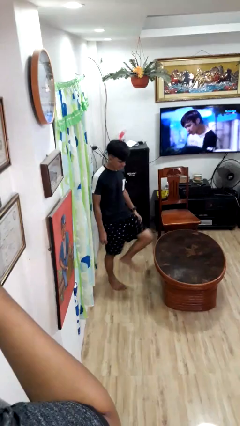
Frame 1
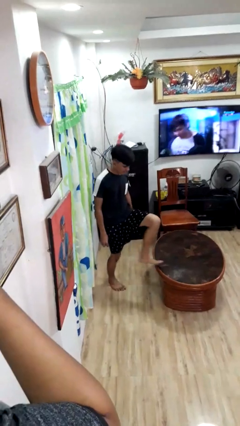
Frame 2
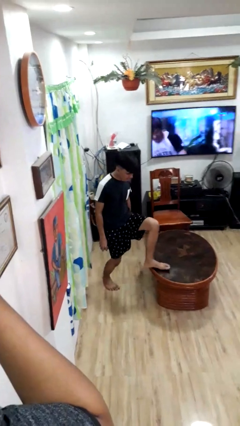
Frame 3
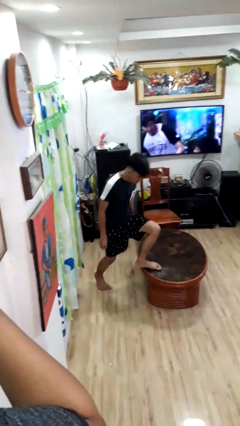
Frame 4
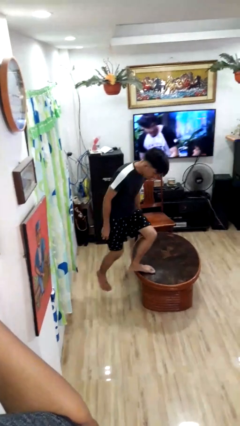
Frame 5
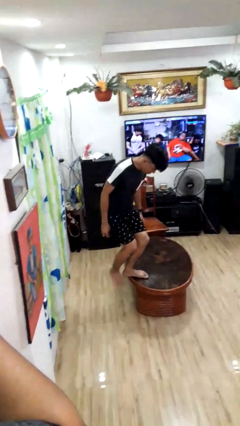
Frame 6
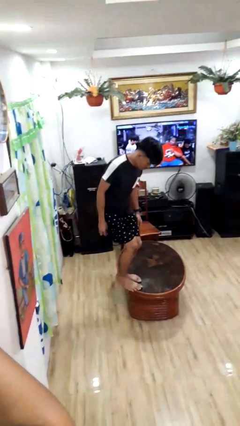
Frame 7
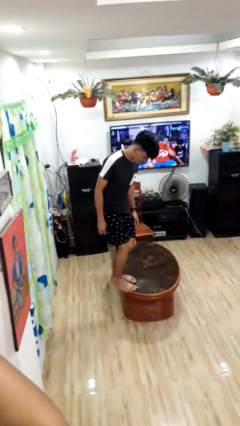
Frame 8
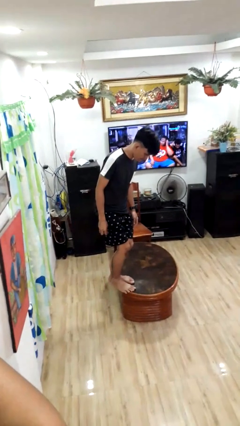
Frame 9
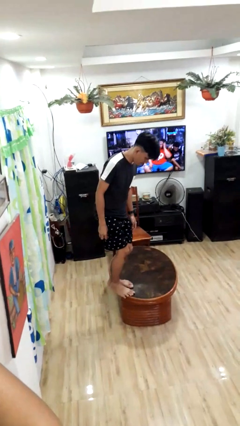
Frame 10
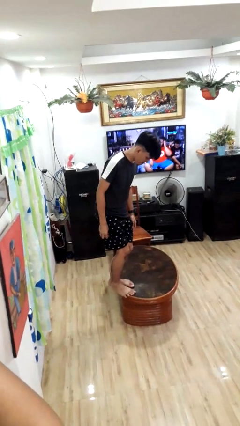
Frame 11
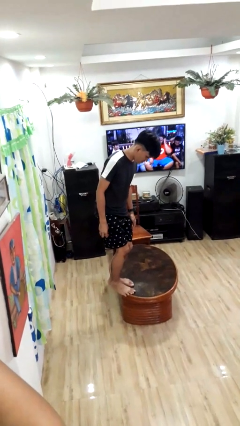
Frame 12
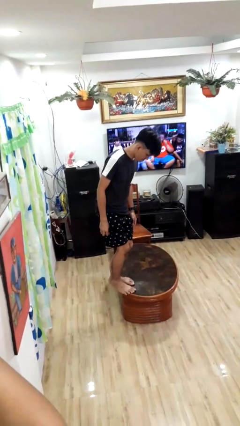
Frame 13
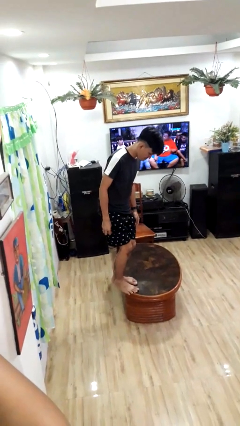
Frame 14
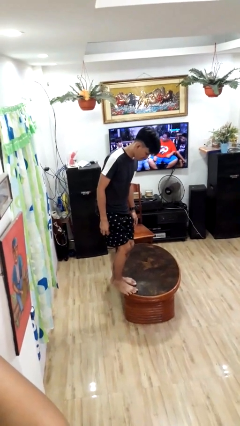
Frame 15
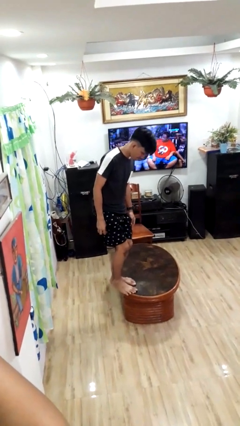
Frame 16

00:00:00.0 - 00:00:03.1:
person climbs on table

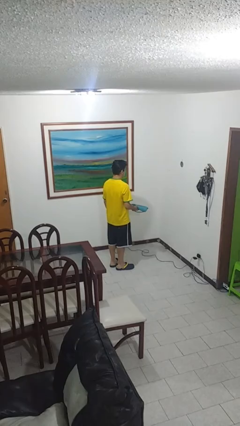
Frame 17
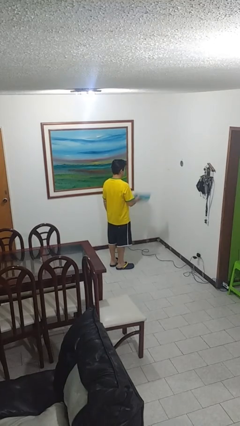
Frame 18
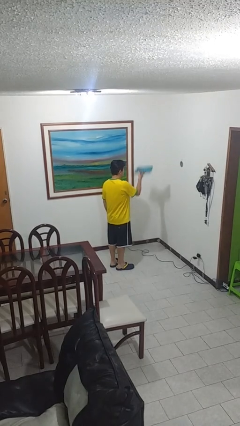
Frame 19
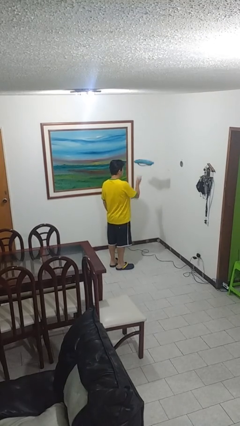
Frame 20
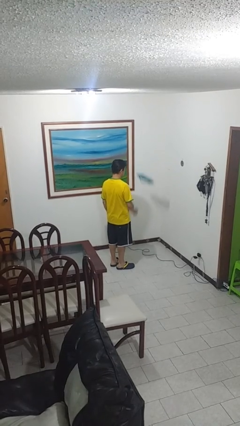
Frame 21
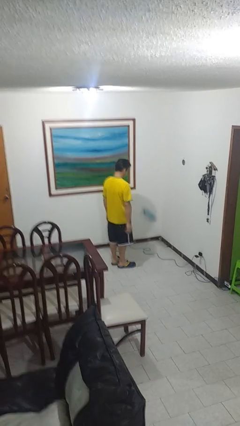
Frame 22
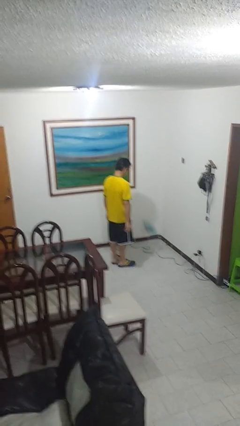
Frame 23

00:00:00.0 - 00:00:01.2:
person throws object into air

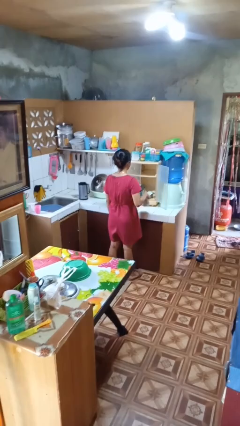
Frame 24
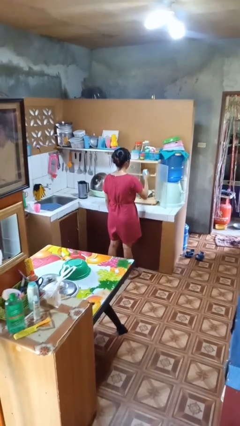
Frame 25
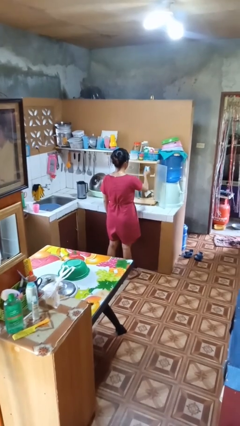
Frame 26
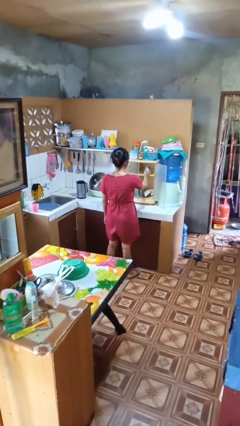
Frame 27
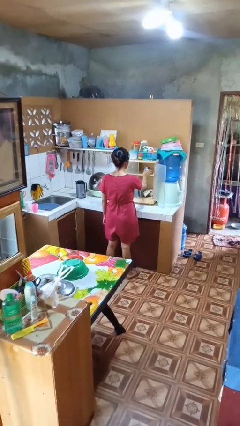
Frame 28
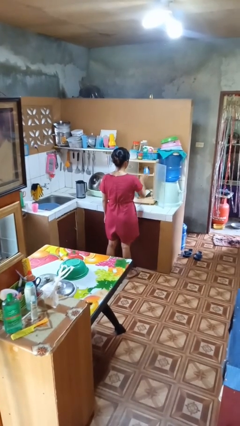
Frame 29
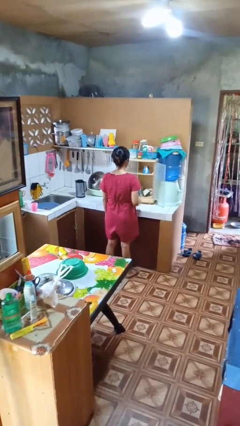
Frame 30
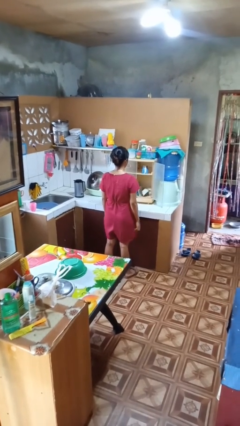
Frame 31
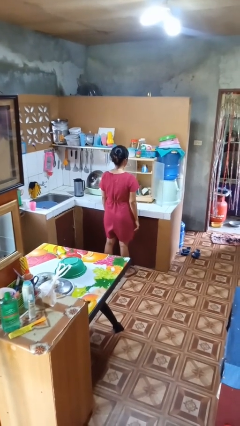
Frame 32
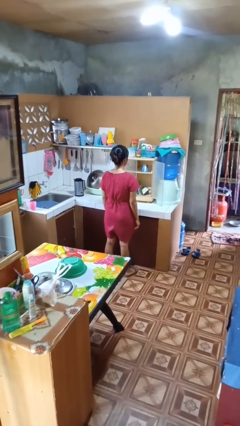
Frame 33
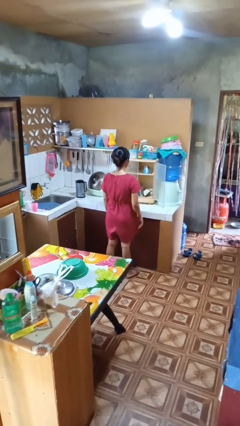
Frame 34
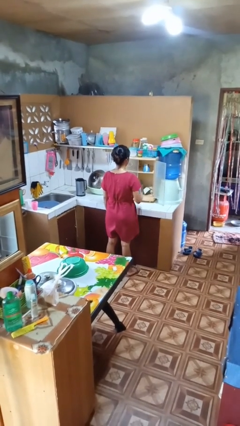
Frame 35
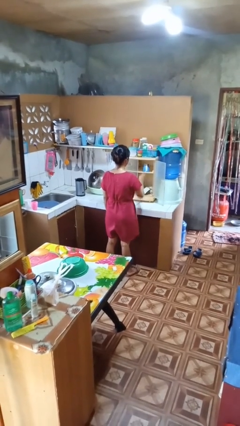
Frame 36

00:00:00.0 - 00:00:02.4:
person puts object in cabinet

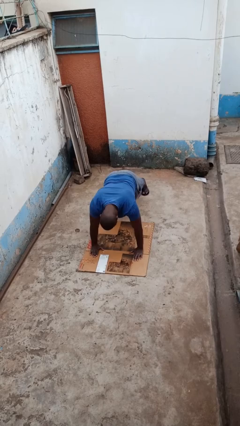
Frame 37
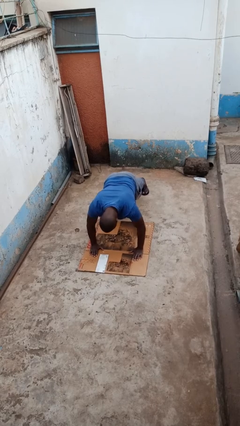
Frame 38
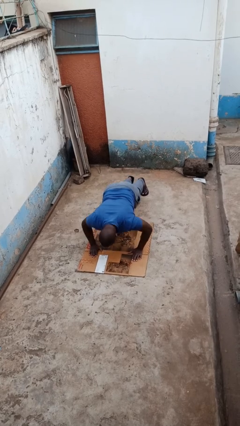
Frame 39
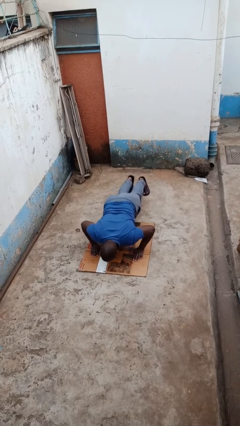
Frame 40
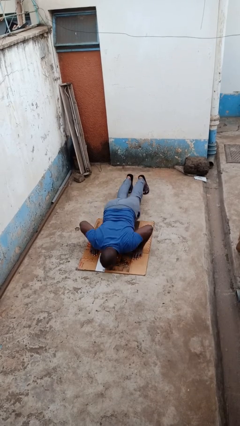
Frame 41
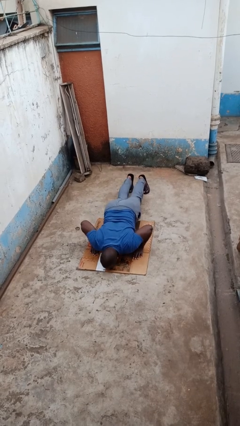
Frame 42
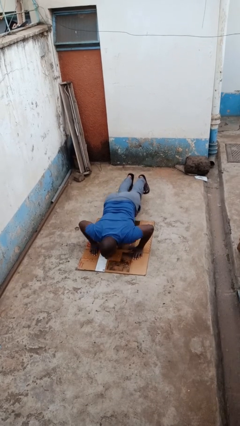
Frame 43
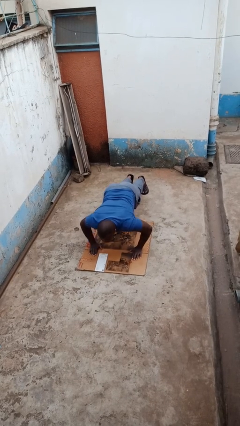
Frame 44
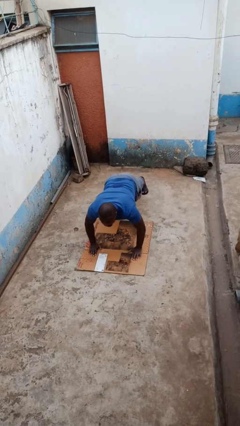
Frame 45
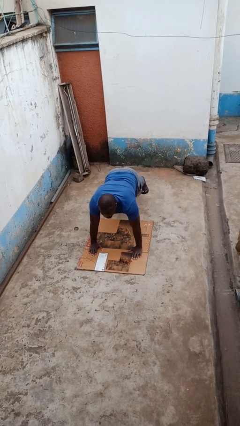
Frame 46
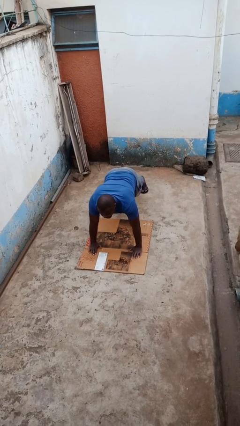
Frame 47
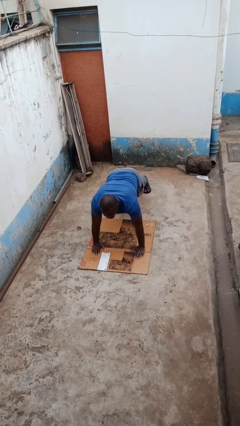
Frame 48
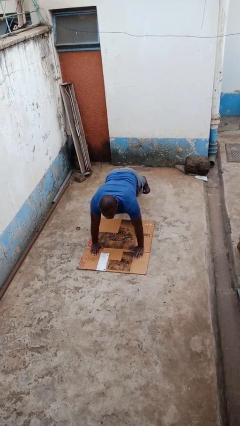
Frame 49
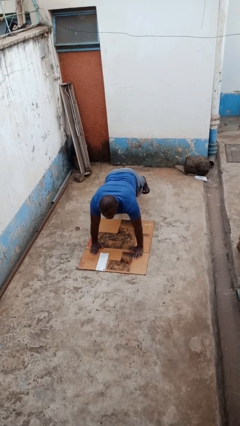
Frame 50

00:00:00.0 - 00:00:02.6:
person exercises with pushup

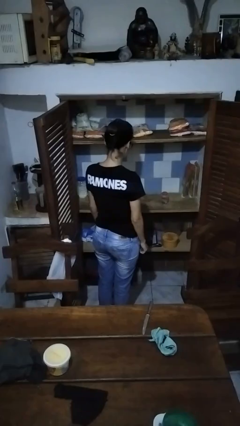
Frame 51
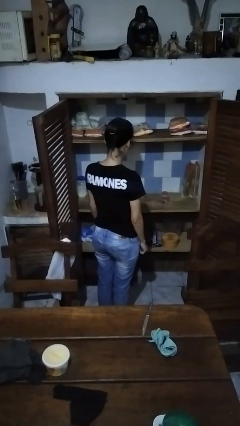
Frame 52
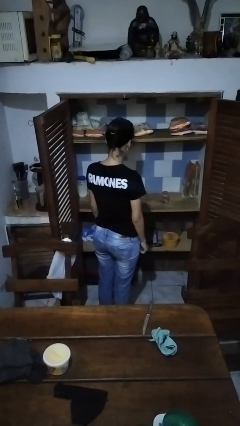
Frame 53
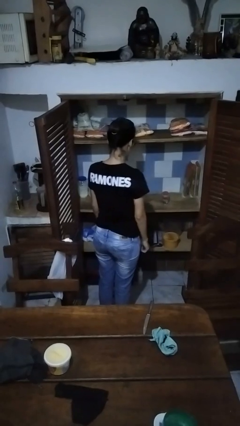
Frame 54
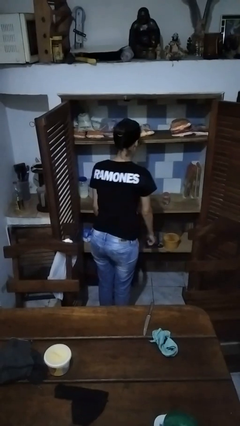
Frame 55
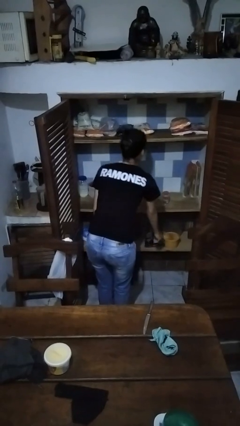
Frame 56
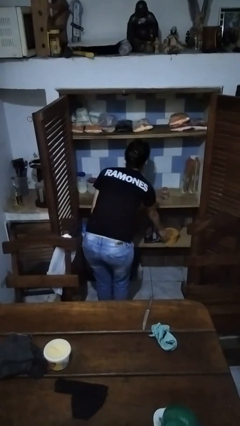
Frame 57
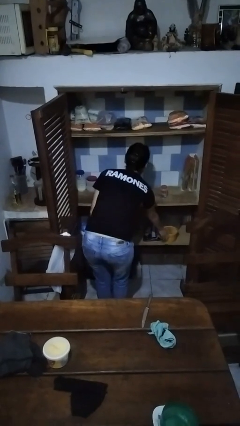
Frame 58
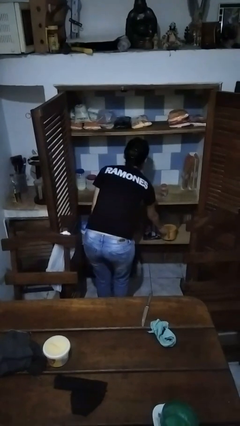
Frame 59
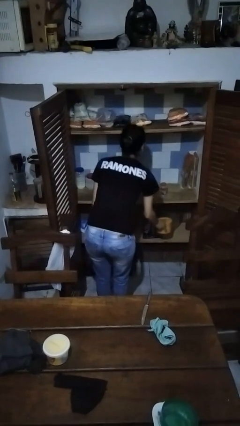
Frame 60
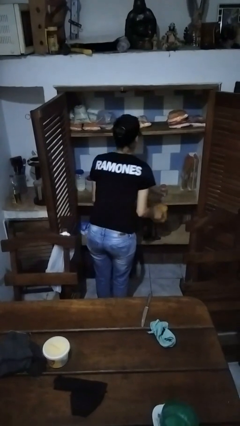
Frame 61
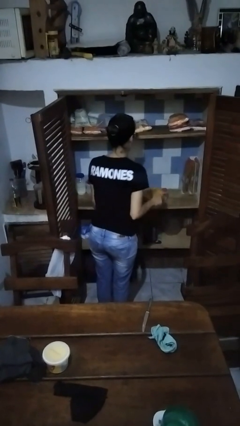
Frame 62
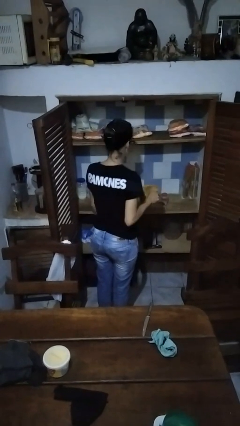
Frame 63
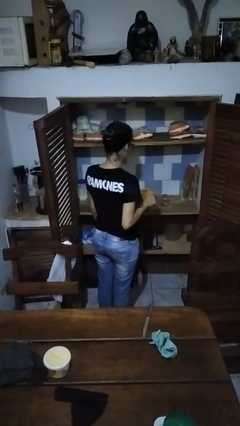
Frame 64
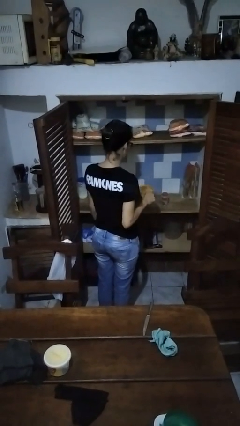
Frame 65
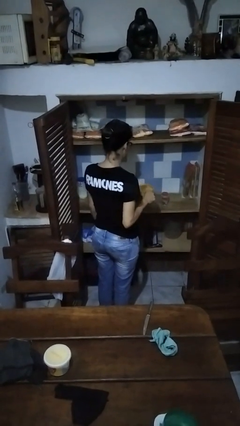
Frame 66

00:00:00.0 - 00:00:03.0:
person takes object from cabinet

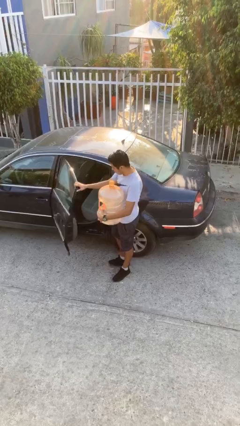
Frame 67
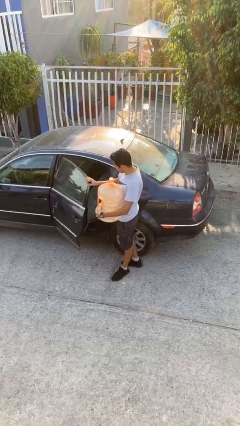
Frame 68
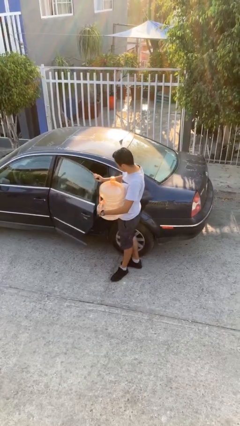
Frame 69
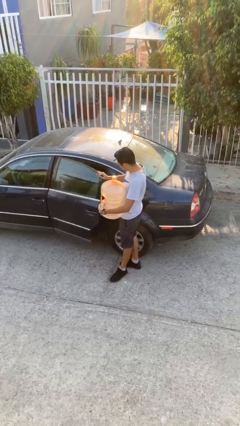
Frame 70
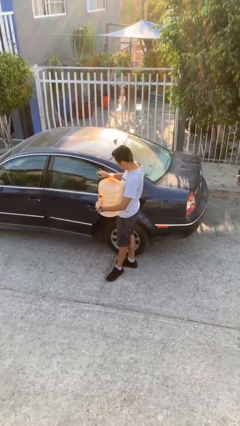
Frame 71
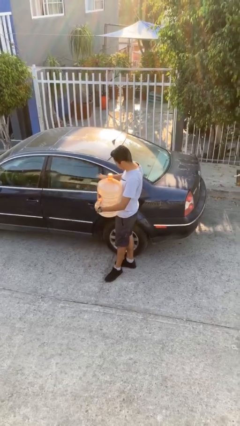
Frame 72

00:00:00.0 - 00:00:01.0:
person closes car door

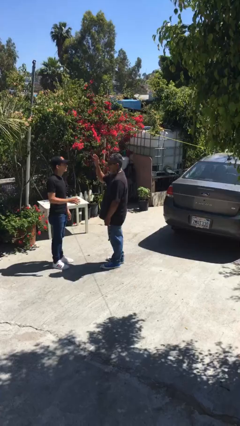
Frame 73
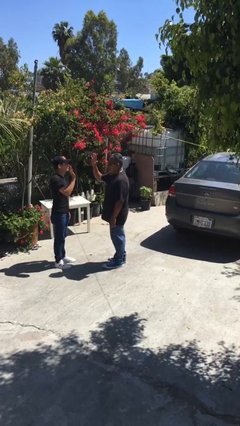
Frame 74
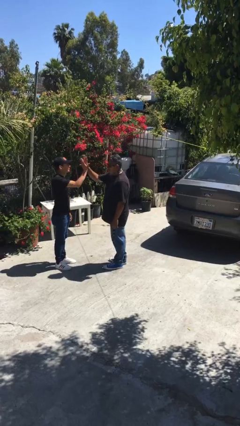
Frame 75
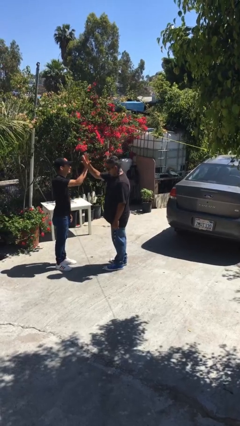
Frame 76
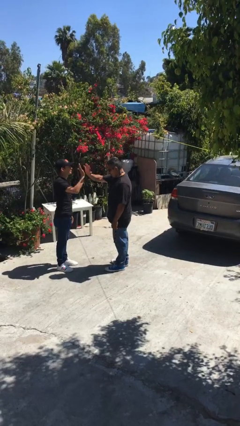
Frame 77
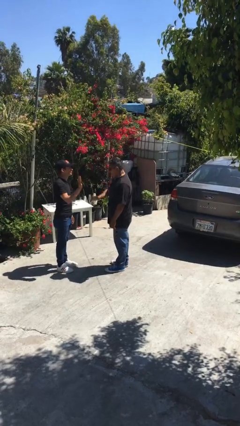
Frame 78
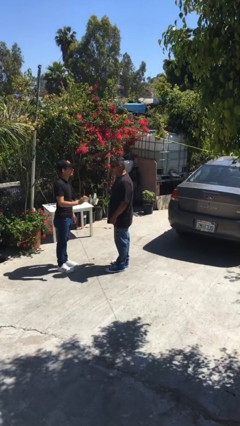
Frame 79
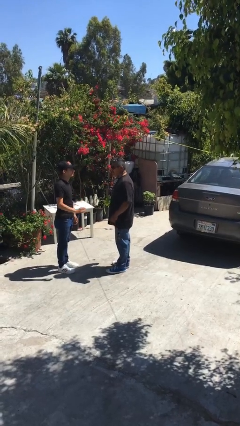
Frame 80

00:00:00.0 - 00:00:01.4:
person highfives hand

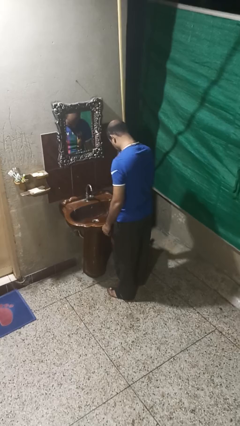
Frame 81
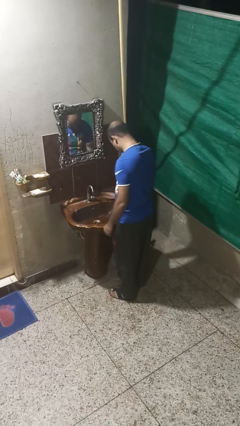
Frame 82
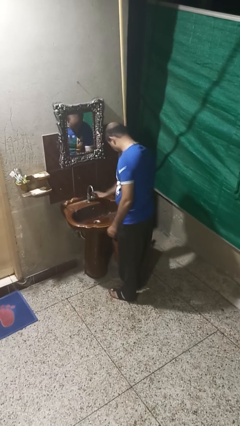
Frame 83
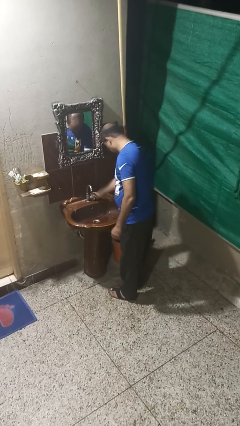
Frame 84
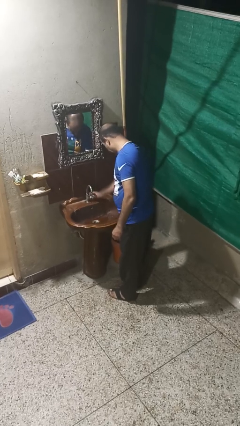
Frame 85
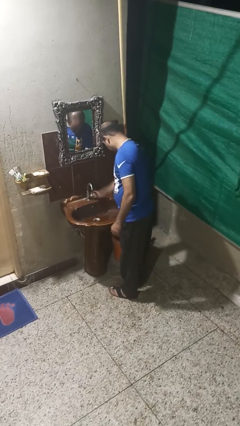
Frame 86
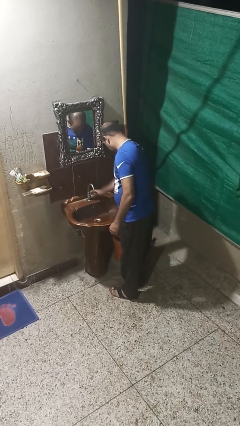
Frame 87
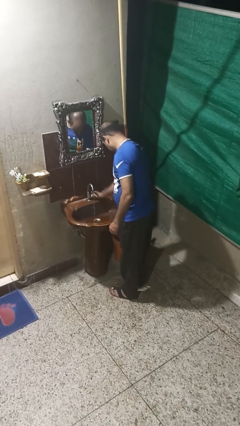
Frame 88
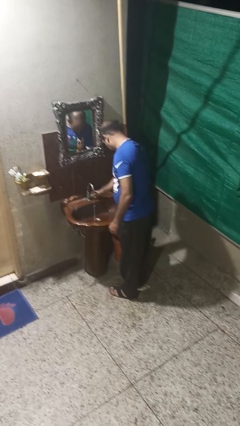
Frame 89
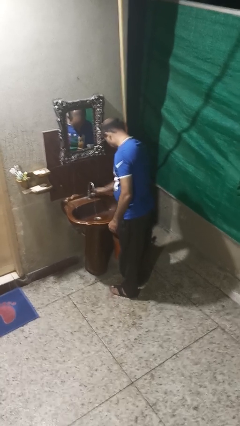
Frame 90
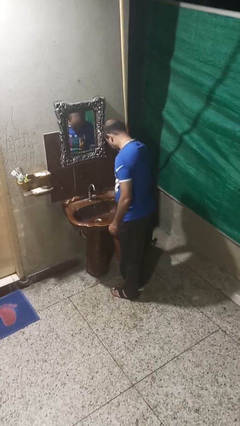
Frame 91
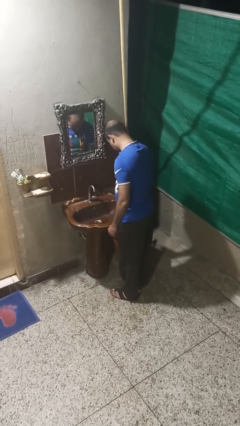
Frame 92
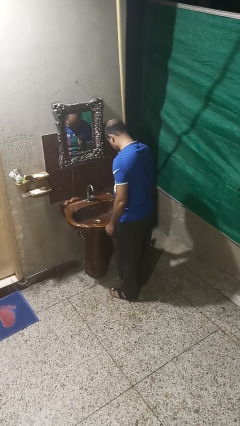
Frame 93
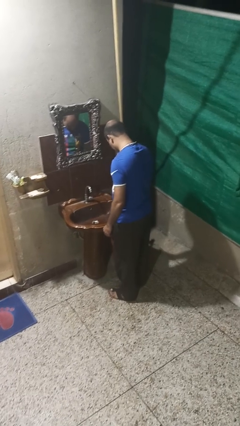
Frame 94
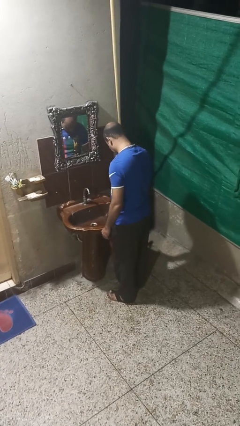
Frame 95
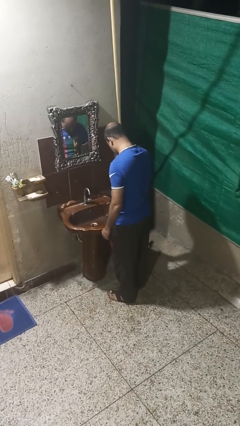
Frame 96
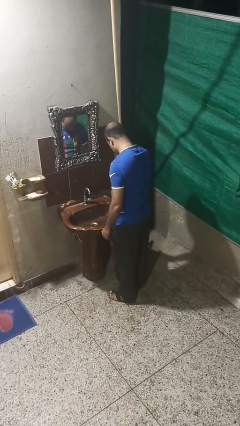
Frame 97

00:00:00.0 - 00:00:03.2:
person turns off faucet
